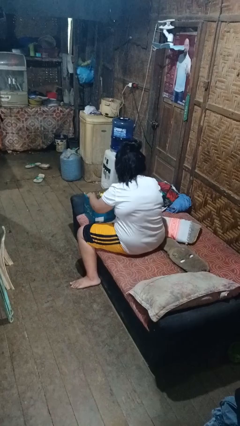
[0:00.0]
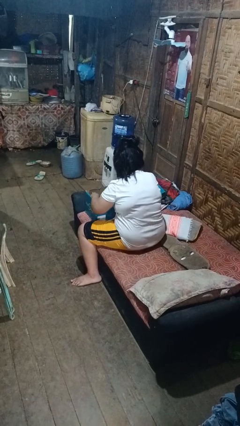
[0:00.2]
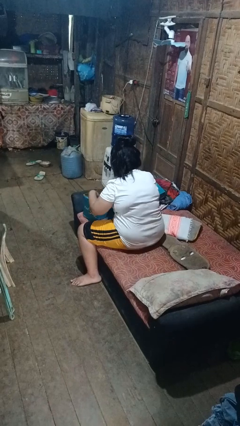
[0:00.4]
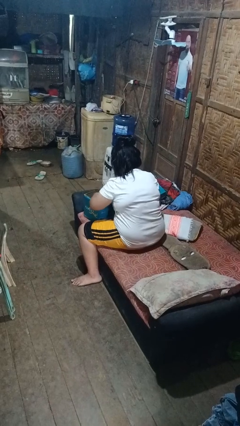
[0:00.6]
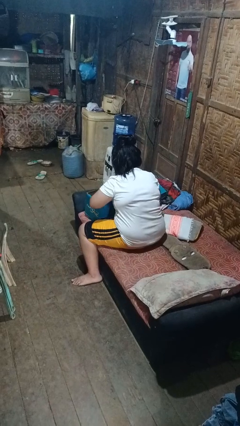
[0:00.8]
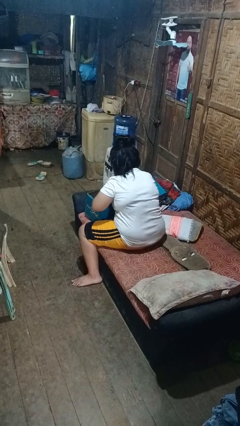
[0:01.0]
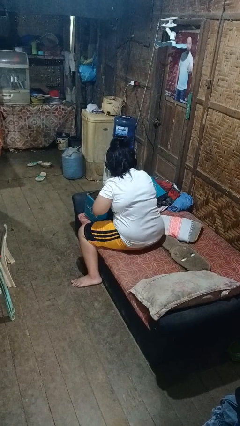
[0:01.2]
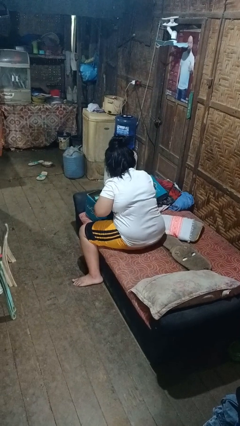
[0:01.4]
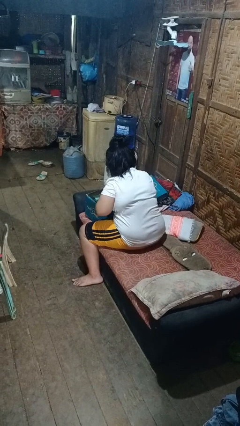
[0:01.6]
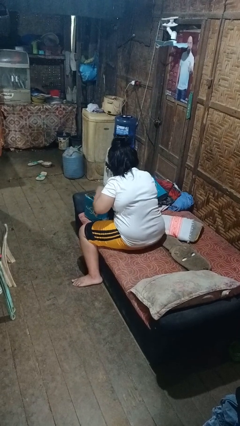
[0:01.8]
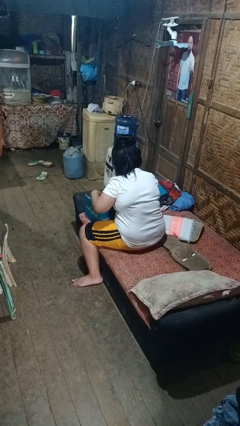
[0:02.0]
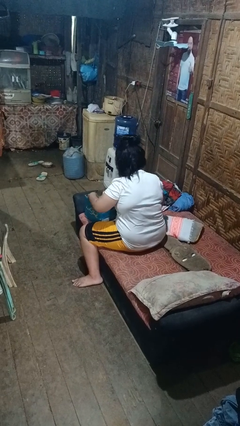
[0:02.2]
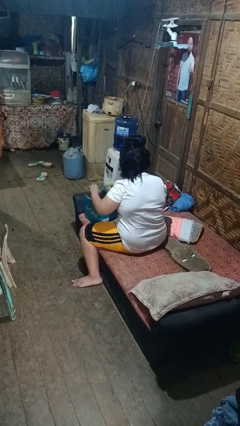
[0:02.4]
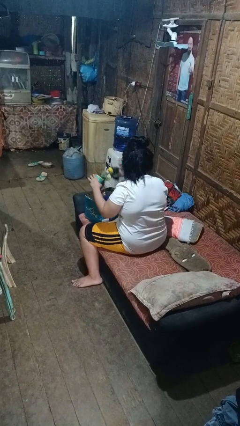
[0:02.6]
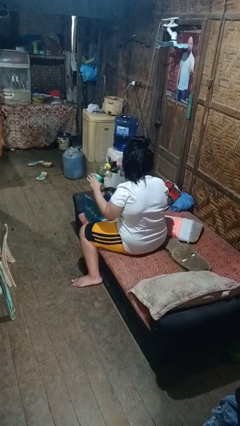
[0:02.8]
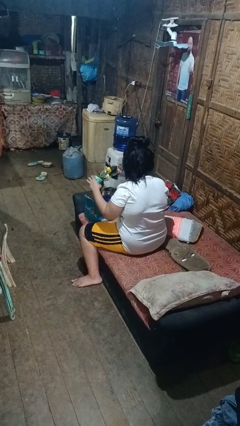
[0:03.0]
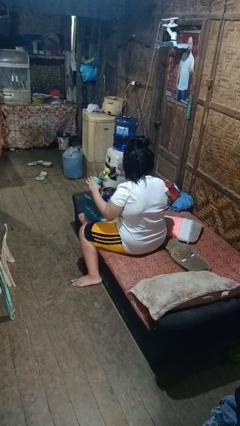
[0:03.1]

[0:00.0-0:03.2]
person searches in box

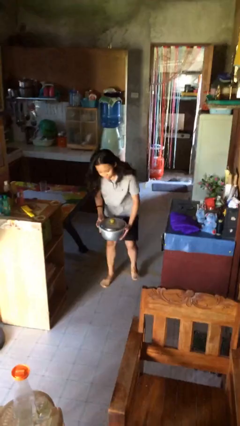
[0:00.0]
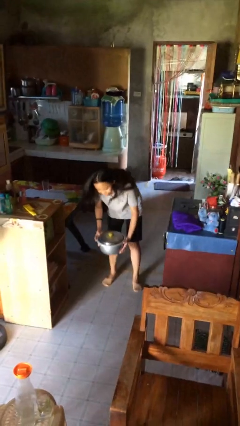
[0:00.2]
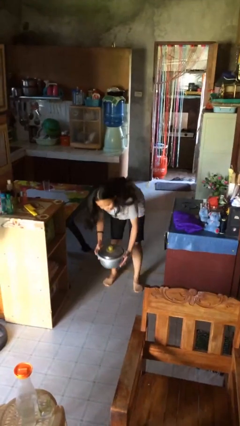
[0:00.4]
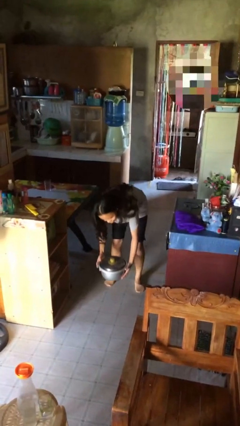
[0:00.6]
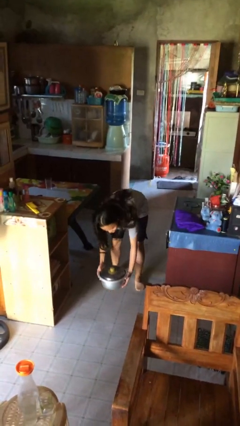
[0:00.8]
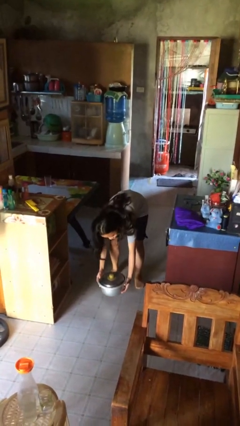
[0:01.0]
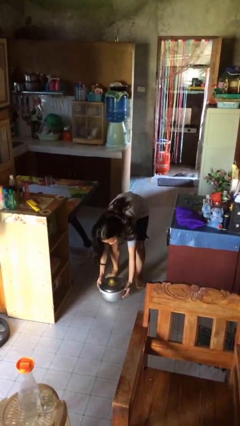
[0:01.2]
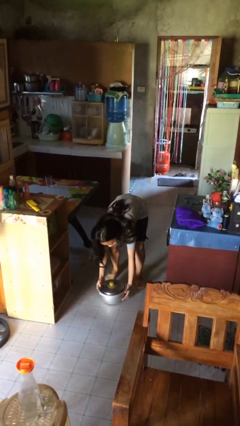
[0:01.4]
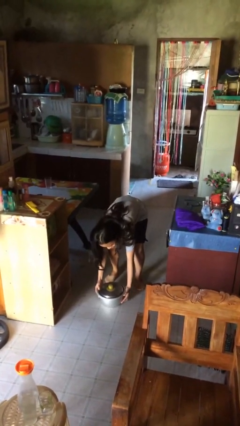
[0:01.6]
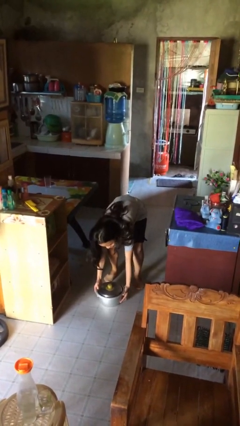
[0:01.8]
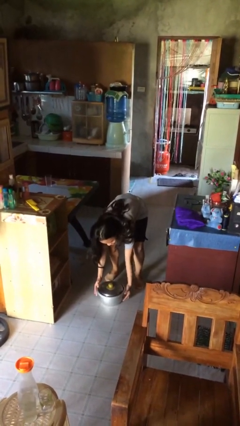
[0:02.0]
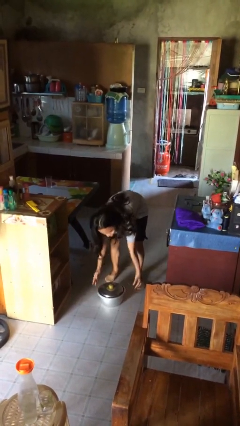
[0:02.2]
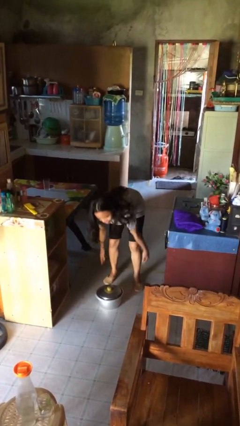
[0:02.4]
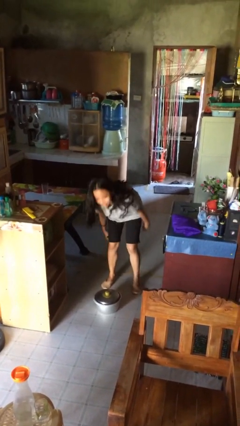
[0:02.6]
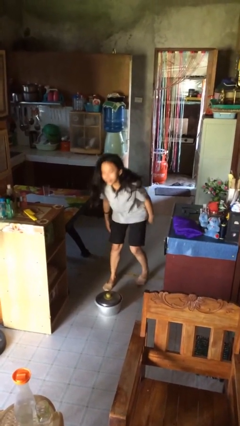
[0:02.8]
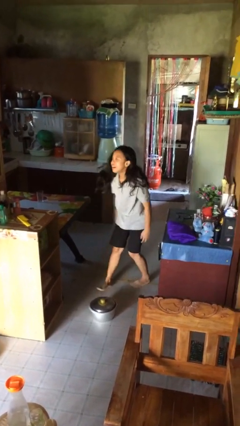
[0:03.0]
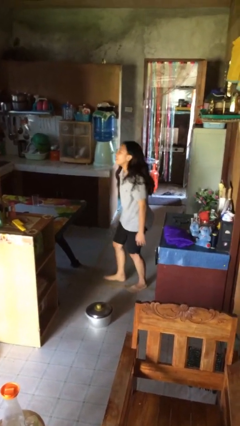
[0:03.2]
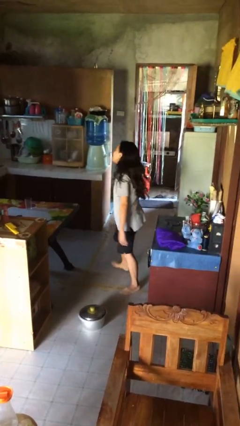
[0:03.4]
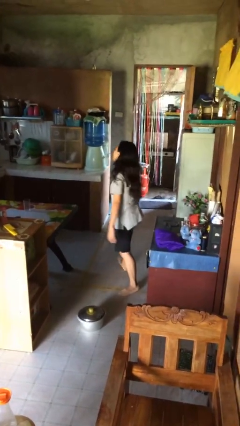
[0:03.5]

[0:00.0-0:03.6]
person puts down object on floor

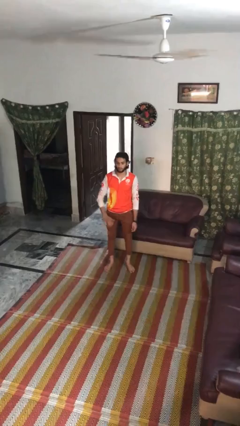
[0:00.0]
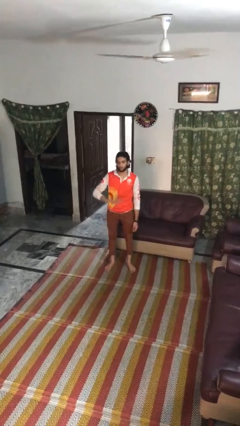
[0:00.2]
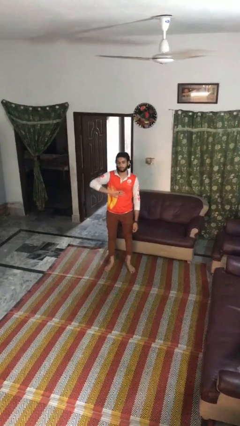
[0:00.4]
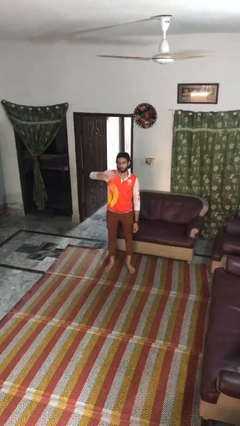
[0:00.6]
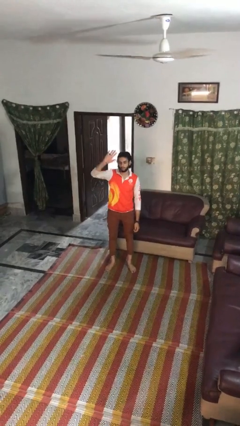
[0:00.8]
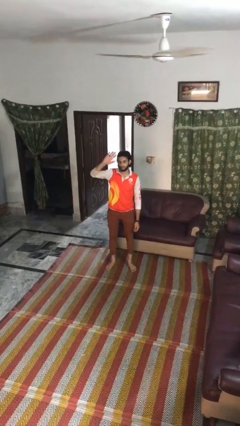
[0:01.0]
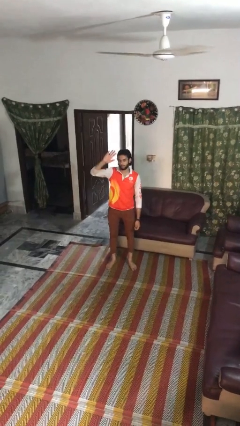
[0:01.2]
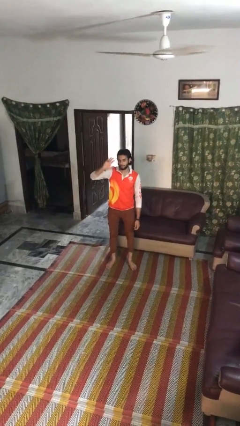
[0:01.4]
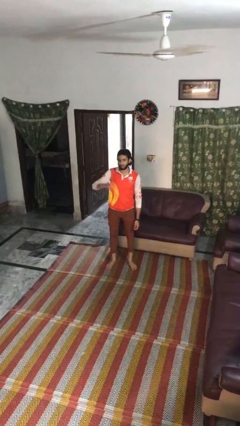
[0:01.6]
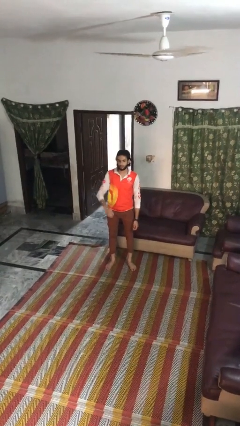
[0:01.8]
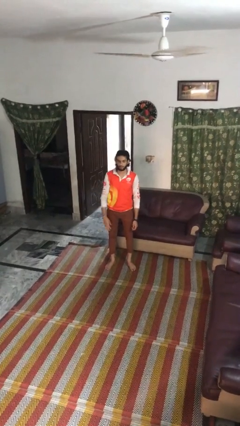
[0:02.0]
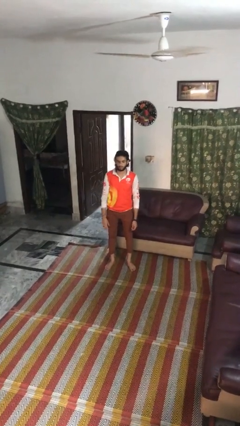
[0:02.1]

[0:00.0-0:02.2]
person gestures swipe up

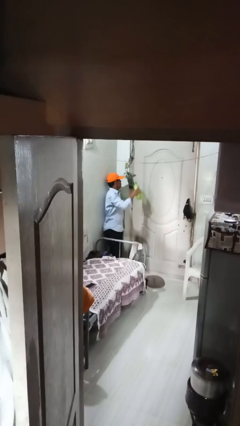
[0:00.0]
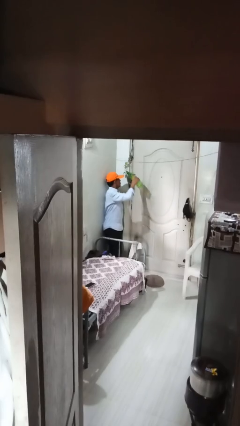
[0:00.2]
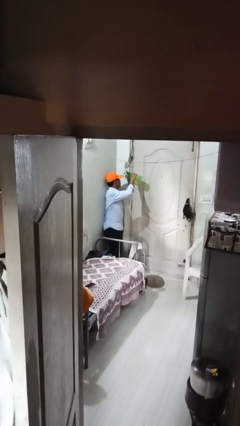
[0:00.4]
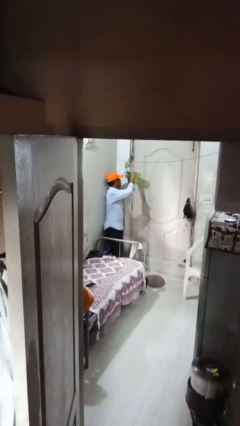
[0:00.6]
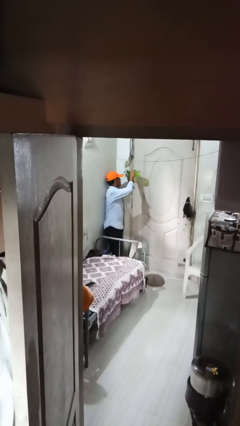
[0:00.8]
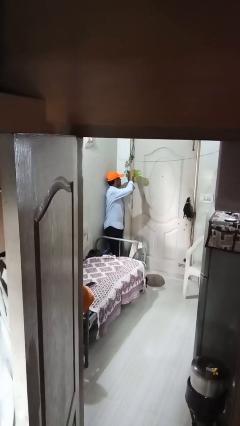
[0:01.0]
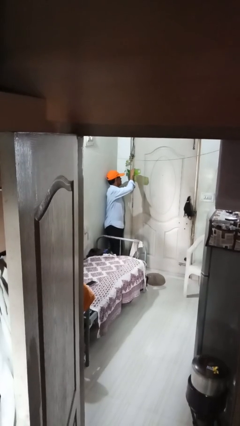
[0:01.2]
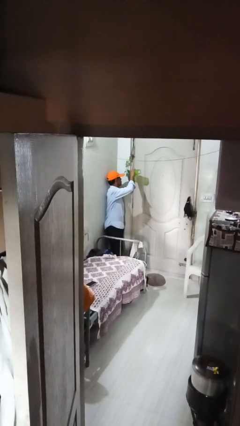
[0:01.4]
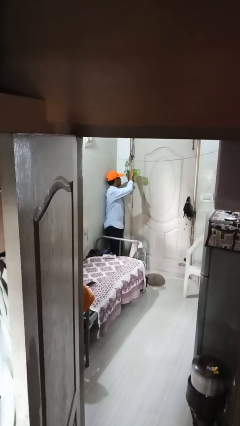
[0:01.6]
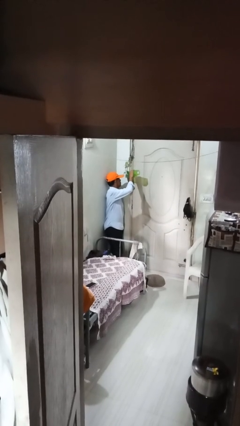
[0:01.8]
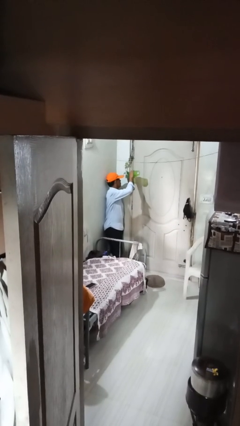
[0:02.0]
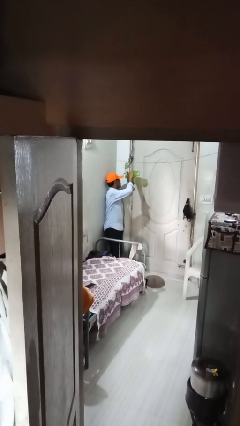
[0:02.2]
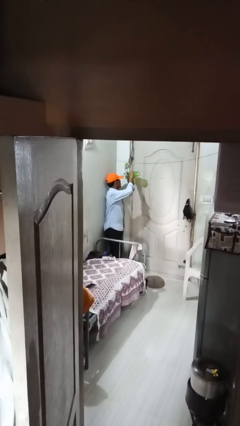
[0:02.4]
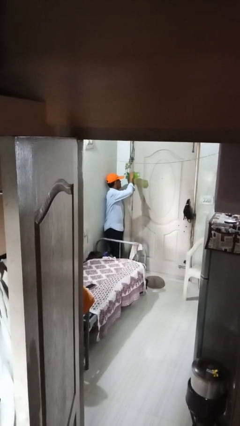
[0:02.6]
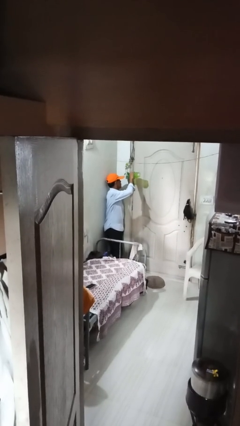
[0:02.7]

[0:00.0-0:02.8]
person waters houseplant

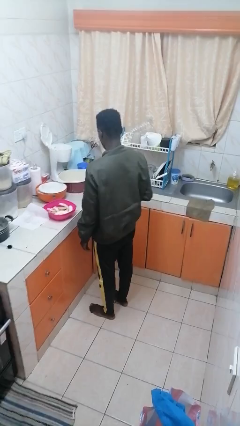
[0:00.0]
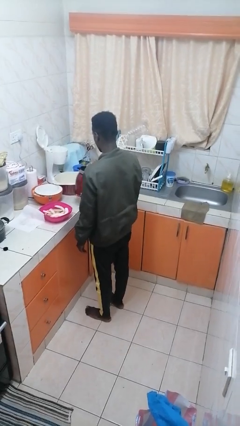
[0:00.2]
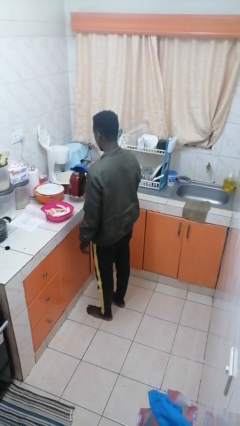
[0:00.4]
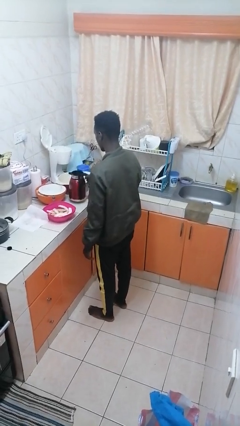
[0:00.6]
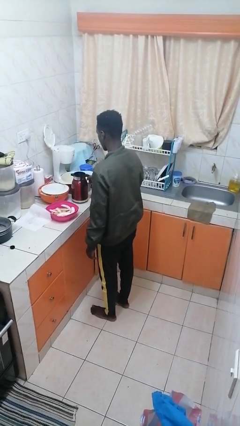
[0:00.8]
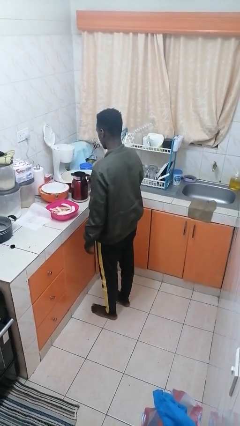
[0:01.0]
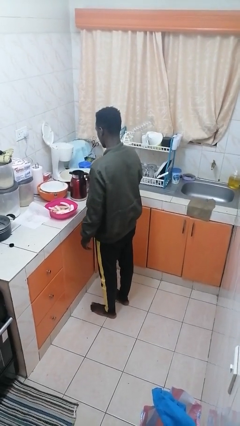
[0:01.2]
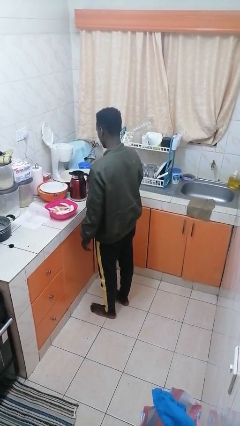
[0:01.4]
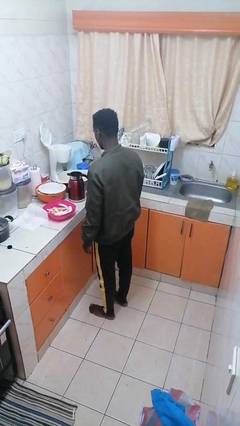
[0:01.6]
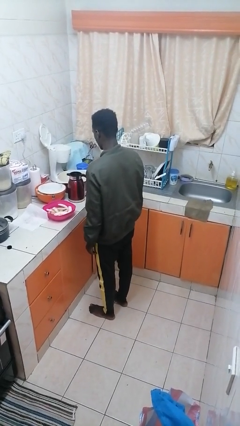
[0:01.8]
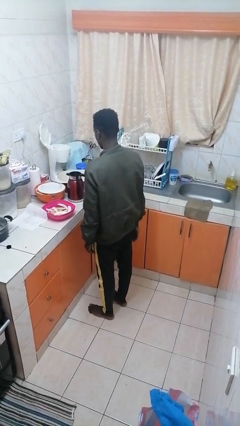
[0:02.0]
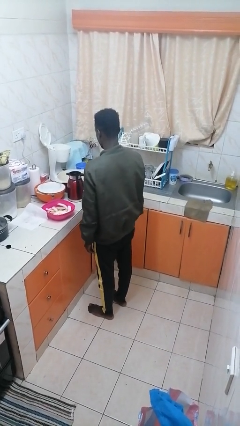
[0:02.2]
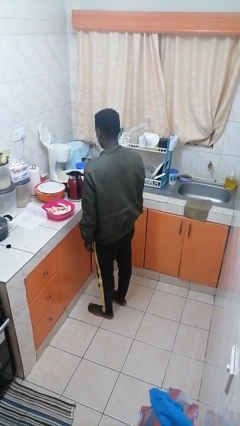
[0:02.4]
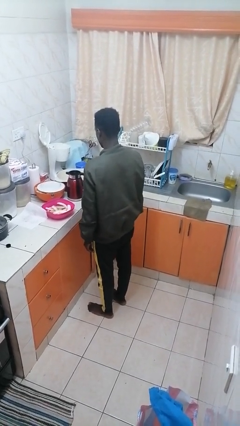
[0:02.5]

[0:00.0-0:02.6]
person puts down object on countertop

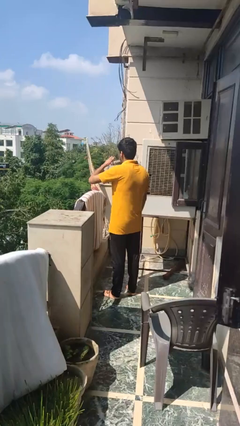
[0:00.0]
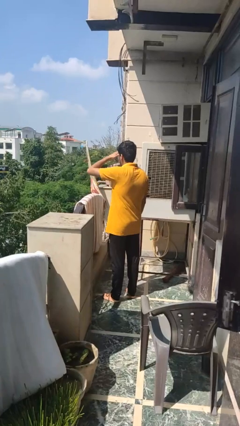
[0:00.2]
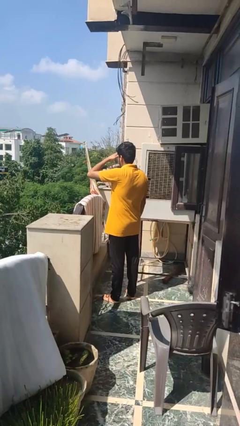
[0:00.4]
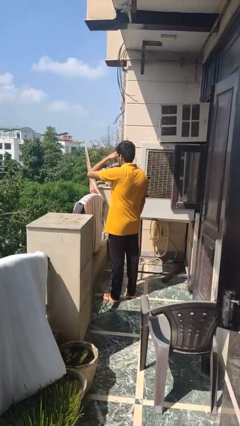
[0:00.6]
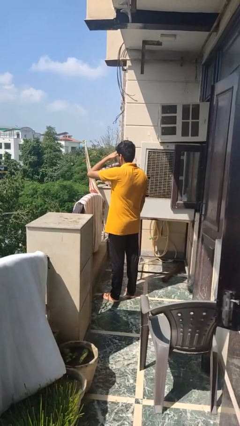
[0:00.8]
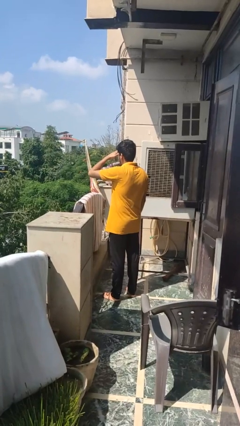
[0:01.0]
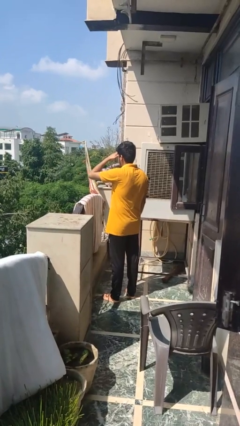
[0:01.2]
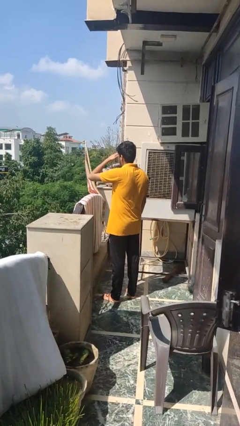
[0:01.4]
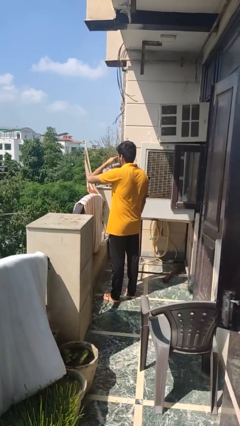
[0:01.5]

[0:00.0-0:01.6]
person shades eyes

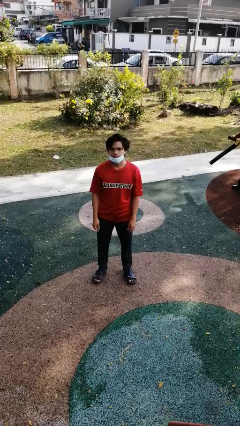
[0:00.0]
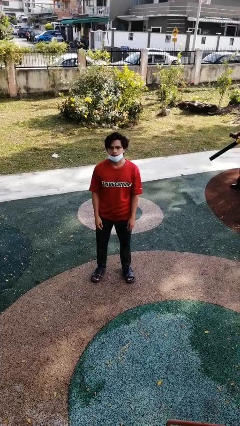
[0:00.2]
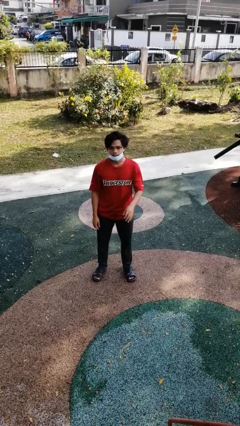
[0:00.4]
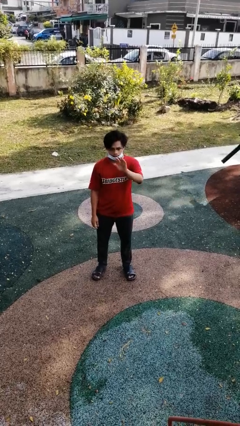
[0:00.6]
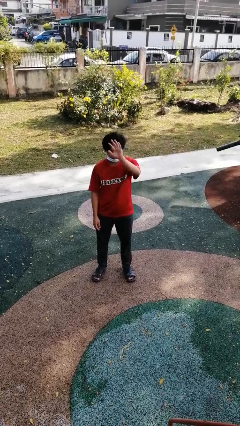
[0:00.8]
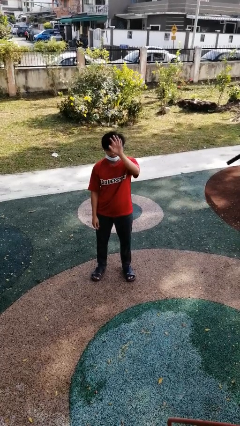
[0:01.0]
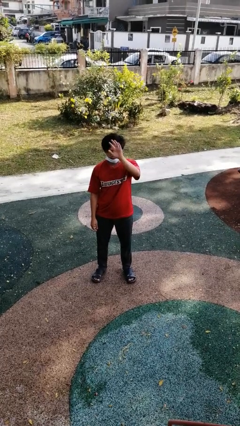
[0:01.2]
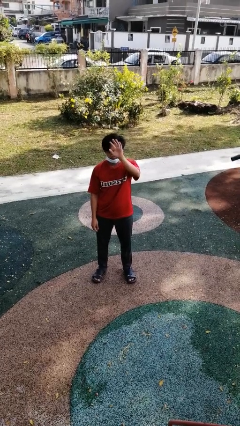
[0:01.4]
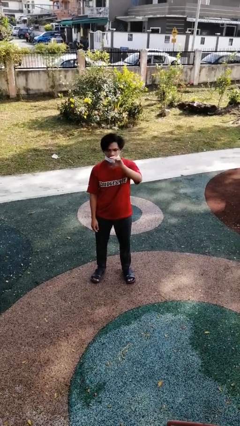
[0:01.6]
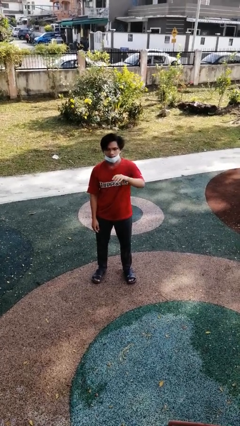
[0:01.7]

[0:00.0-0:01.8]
person waves at person
